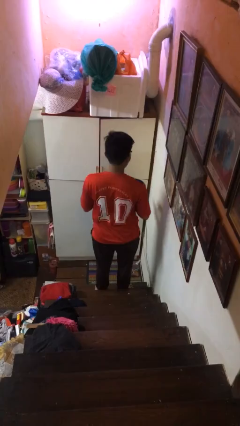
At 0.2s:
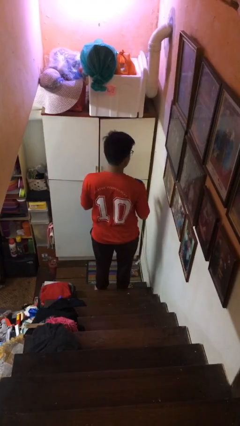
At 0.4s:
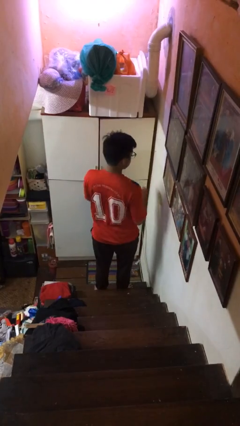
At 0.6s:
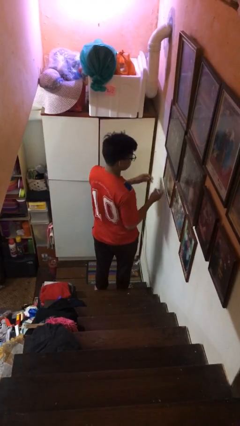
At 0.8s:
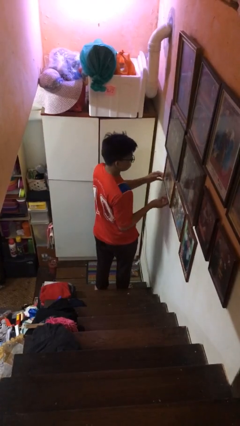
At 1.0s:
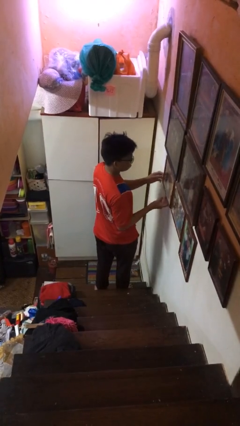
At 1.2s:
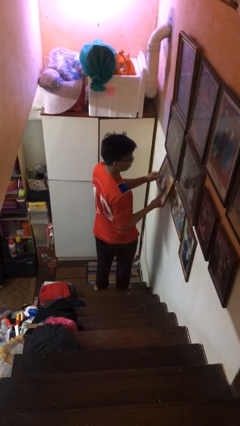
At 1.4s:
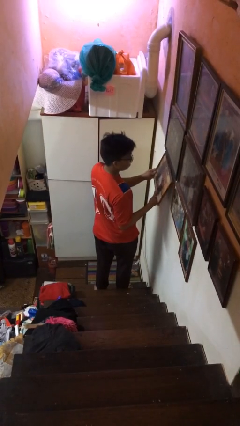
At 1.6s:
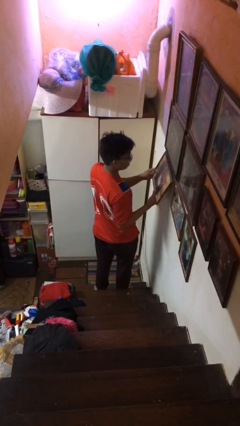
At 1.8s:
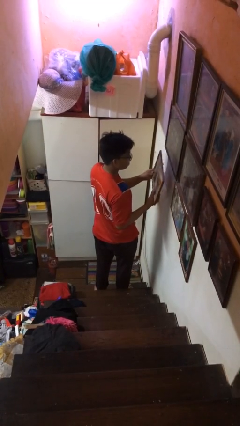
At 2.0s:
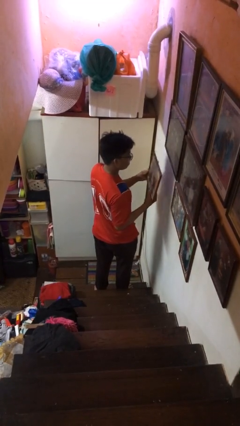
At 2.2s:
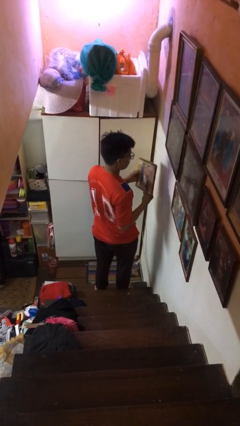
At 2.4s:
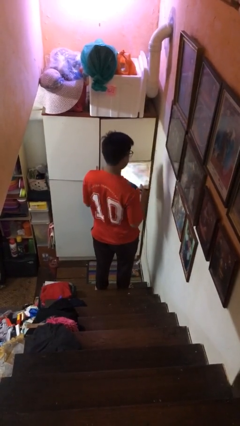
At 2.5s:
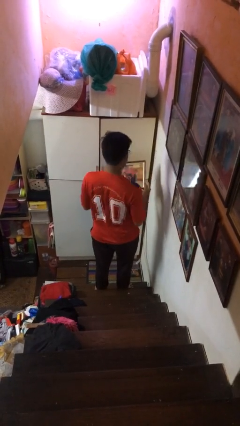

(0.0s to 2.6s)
person takes down picture frame

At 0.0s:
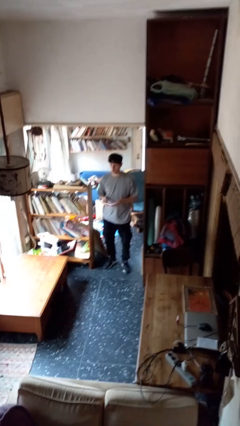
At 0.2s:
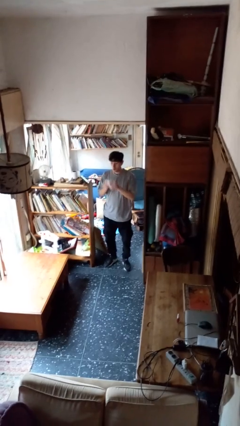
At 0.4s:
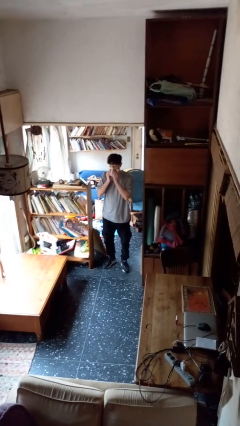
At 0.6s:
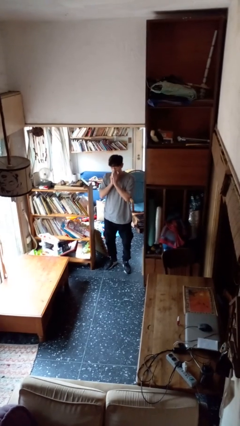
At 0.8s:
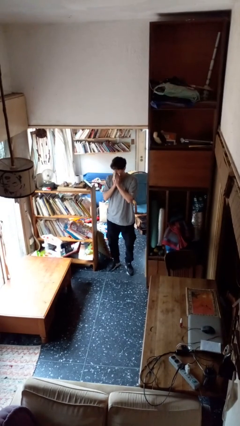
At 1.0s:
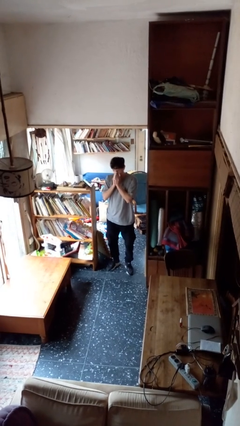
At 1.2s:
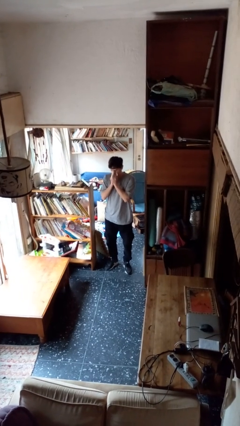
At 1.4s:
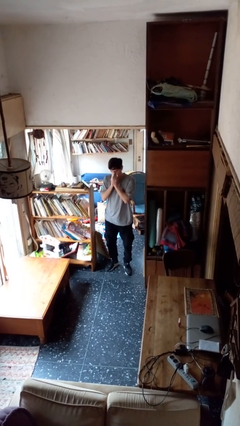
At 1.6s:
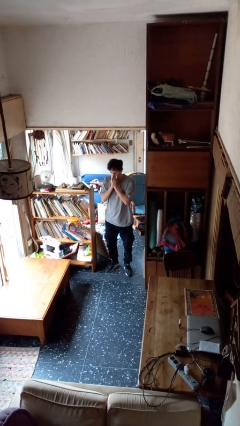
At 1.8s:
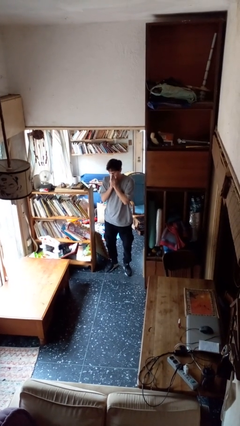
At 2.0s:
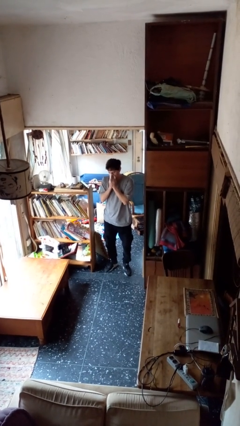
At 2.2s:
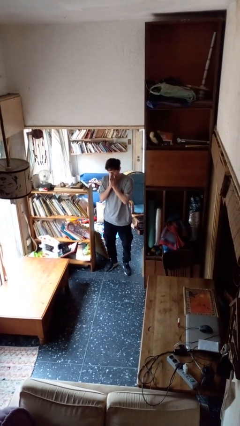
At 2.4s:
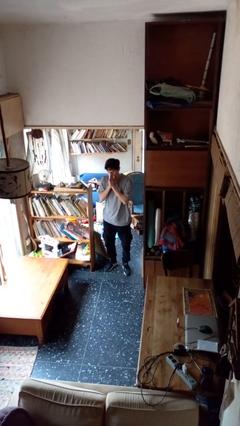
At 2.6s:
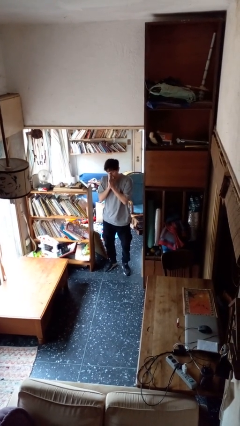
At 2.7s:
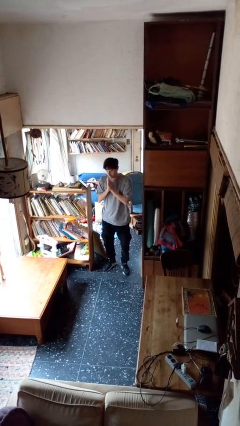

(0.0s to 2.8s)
person blows nose

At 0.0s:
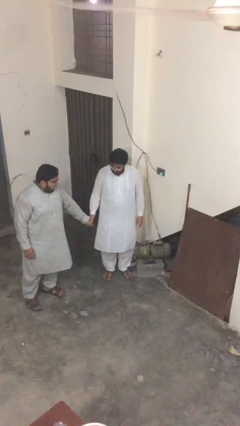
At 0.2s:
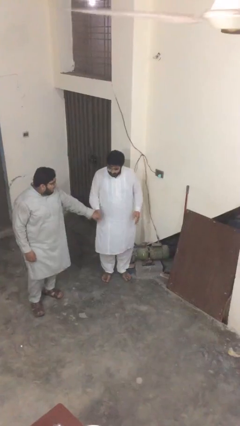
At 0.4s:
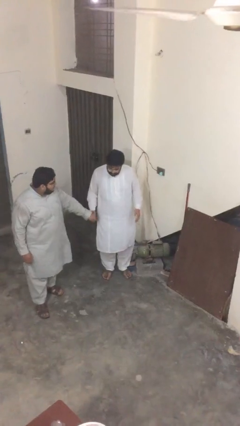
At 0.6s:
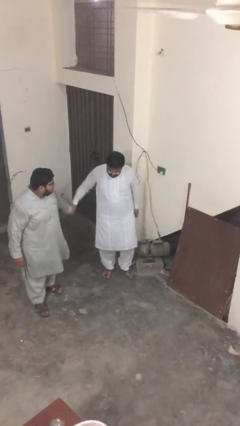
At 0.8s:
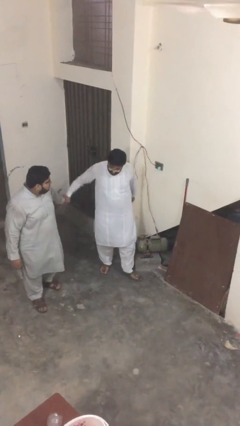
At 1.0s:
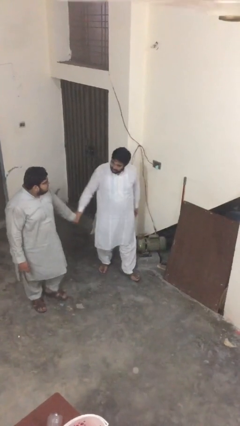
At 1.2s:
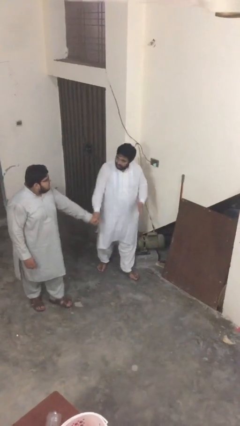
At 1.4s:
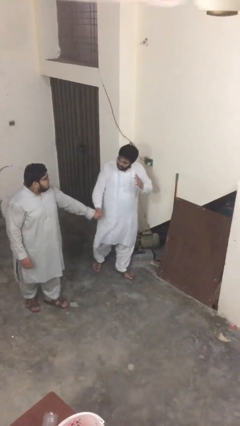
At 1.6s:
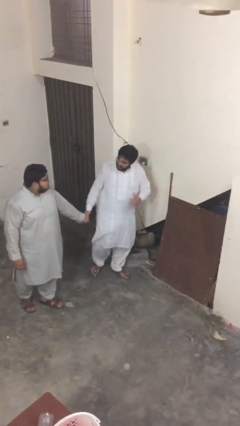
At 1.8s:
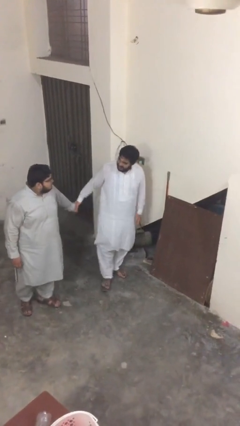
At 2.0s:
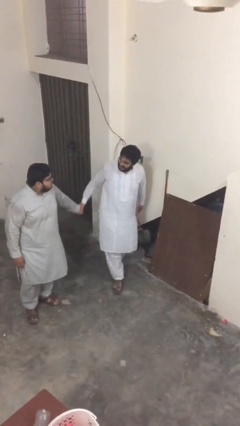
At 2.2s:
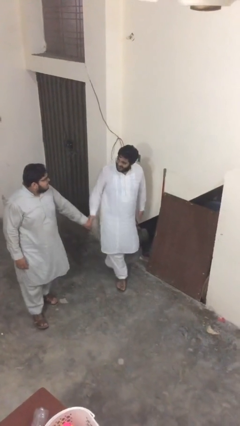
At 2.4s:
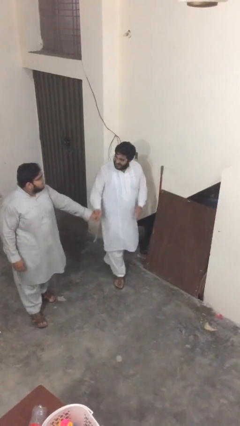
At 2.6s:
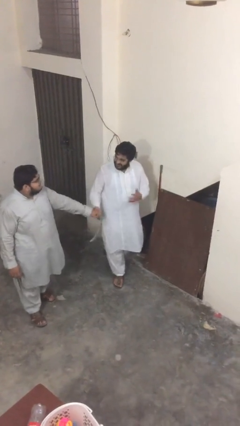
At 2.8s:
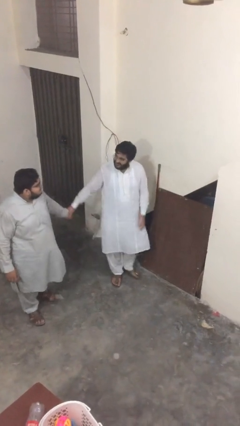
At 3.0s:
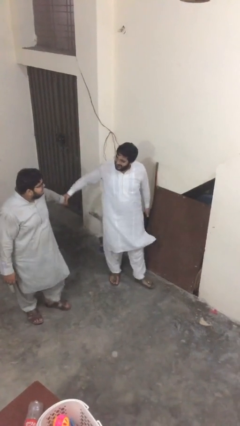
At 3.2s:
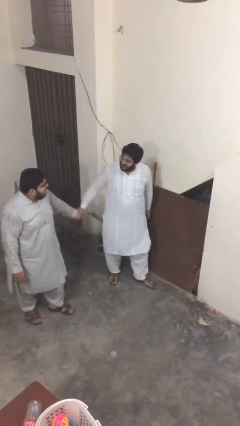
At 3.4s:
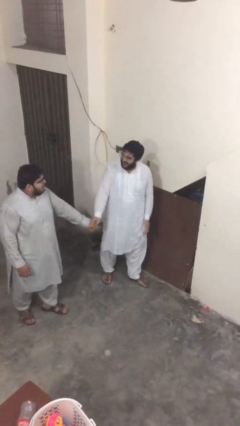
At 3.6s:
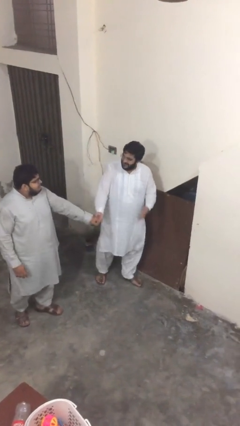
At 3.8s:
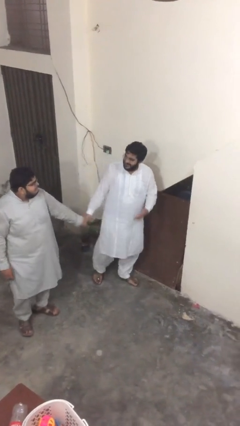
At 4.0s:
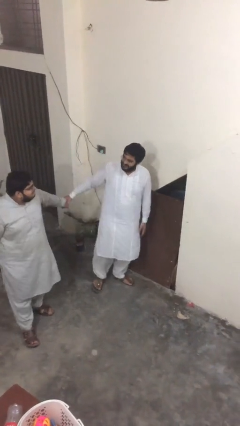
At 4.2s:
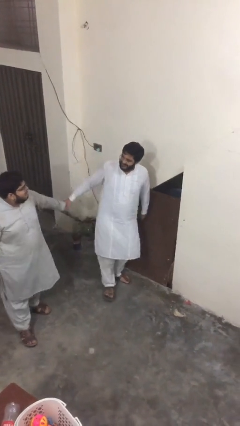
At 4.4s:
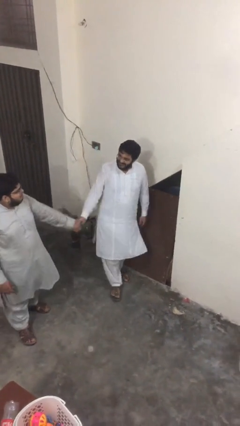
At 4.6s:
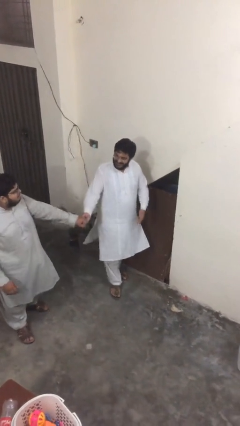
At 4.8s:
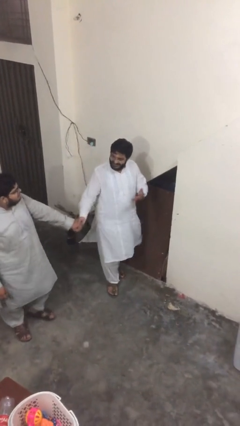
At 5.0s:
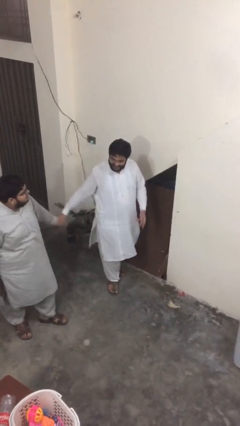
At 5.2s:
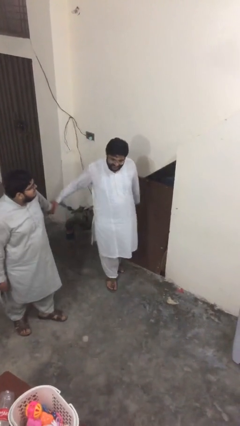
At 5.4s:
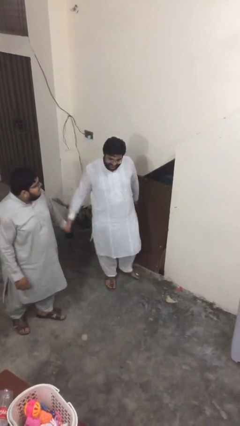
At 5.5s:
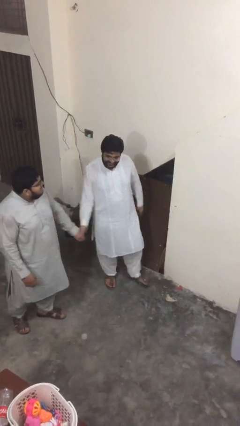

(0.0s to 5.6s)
person holds hand

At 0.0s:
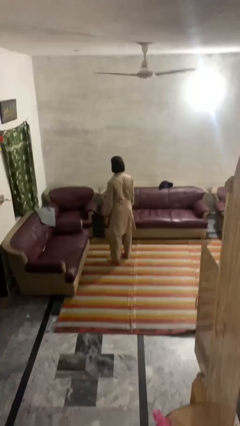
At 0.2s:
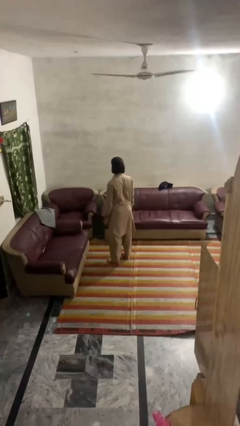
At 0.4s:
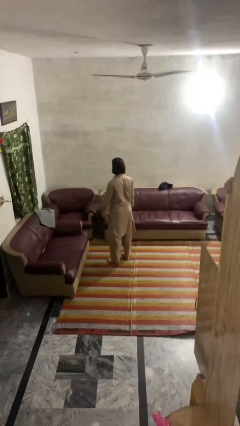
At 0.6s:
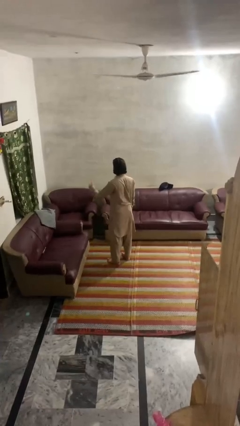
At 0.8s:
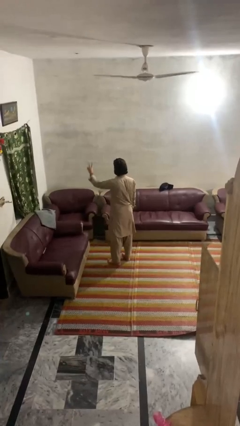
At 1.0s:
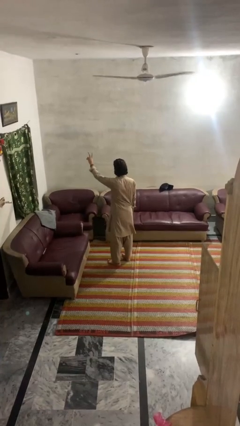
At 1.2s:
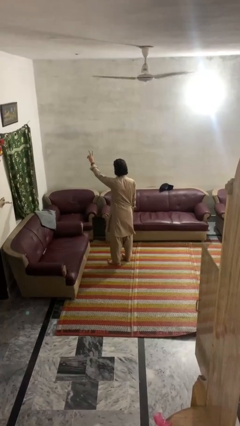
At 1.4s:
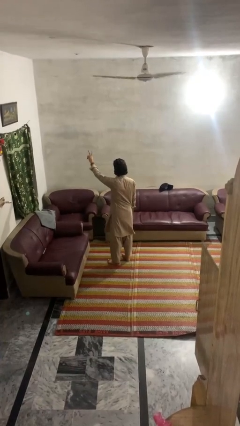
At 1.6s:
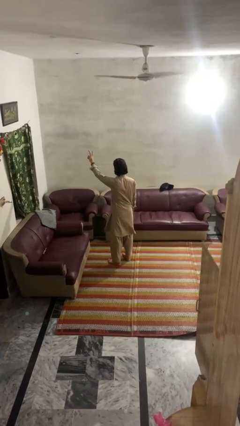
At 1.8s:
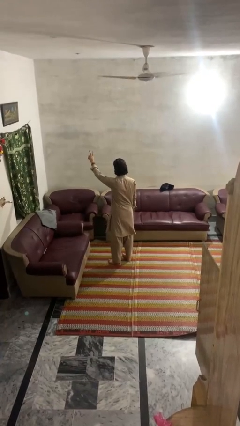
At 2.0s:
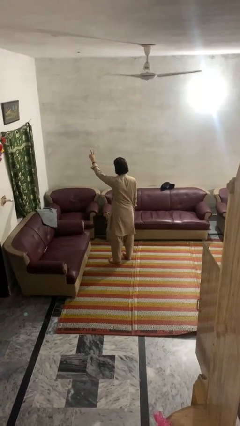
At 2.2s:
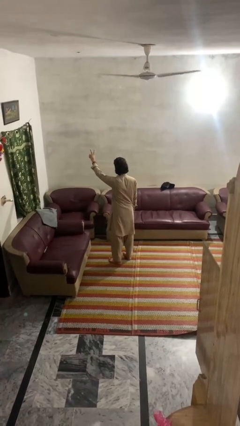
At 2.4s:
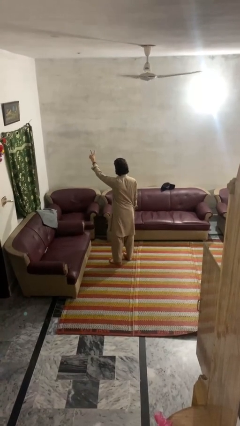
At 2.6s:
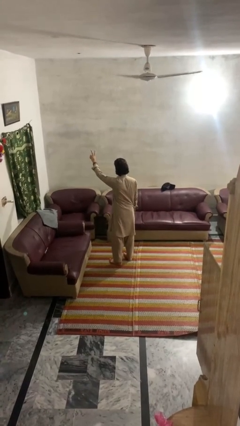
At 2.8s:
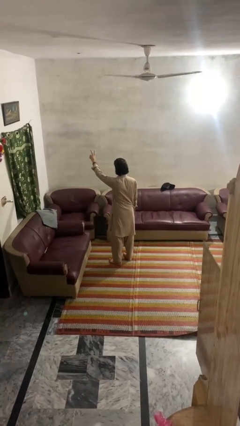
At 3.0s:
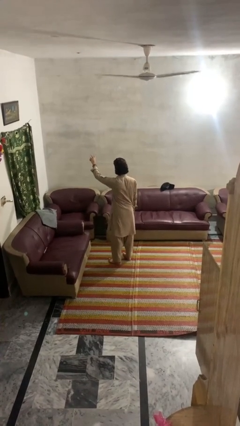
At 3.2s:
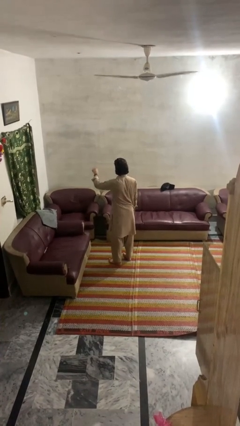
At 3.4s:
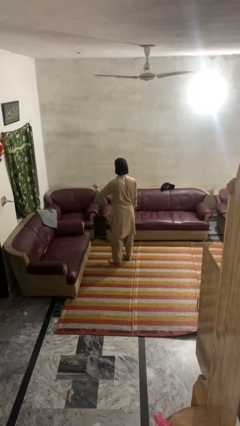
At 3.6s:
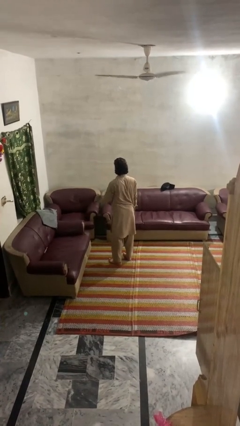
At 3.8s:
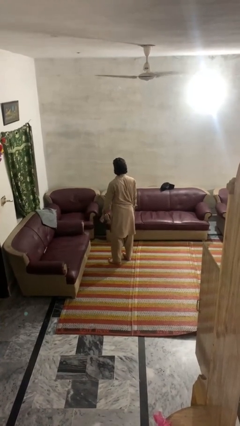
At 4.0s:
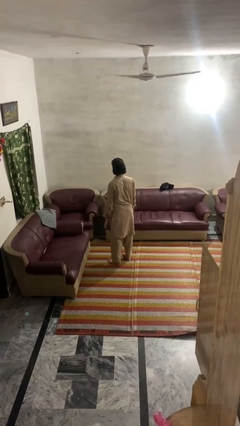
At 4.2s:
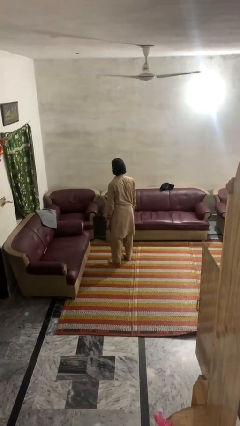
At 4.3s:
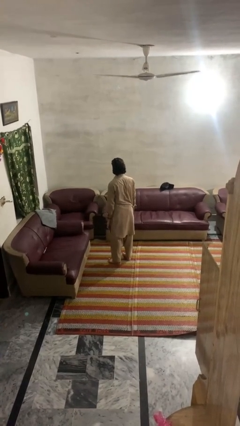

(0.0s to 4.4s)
person gestures peace

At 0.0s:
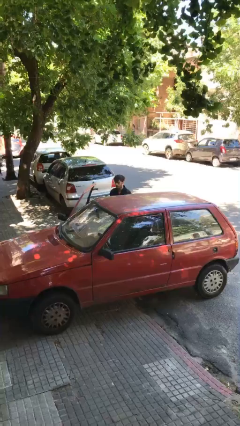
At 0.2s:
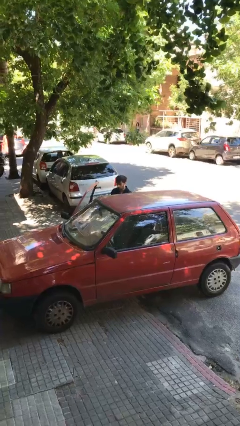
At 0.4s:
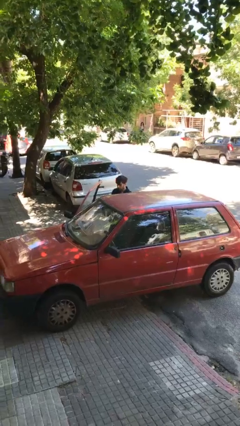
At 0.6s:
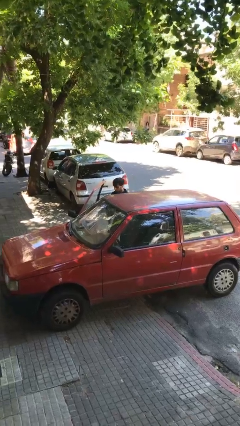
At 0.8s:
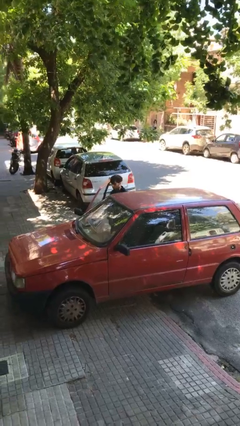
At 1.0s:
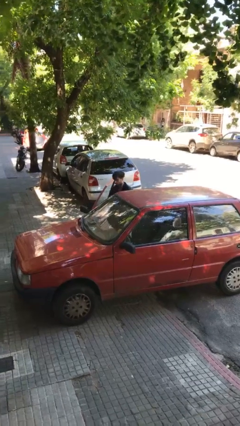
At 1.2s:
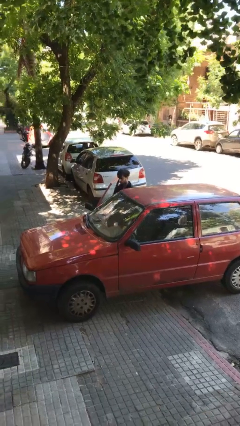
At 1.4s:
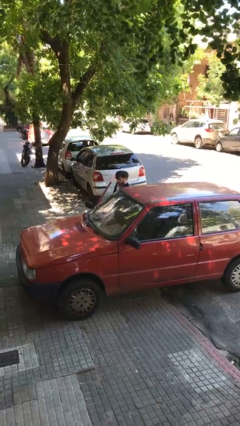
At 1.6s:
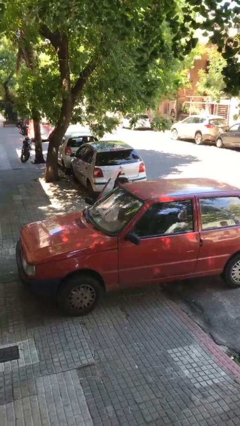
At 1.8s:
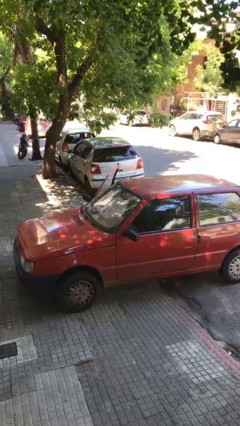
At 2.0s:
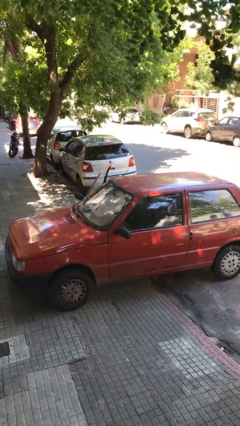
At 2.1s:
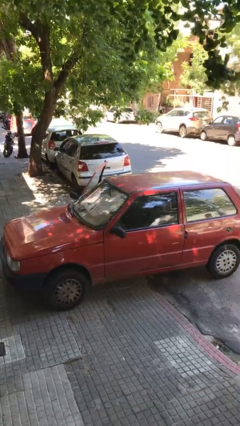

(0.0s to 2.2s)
person enters car

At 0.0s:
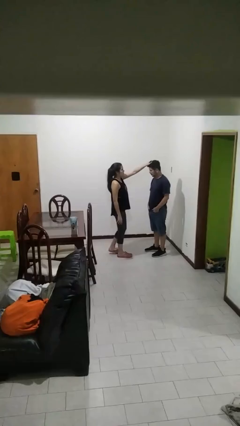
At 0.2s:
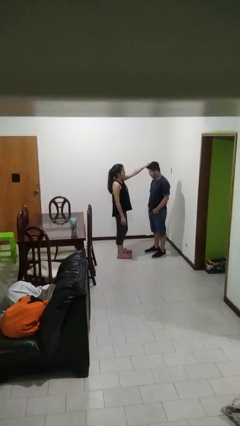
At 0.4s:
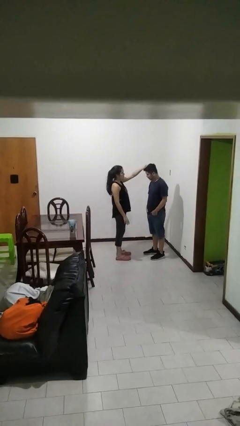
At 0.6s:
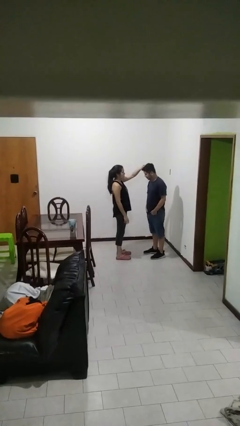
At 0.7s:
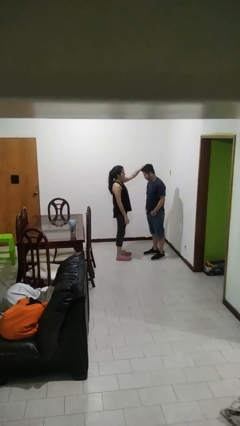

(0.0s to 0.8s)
person grabs person by hair
